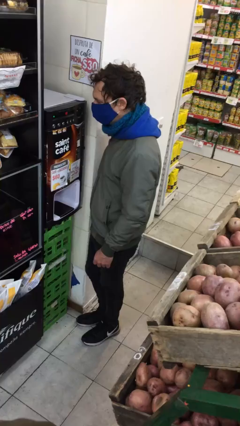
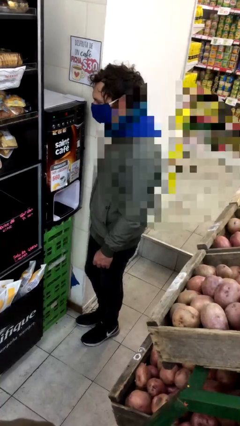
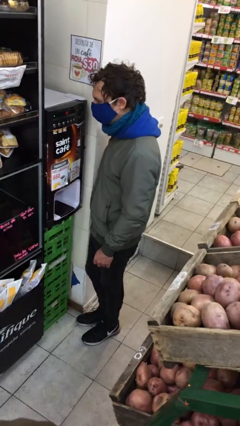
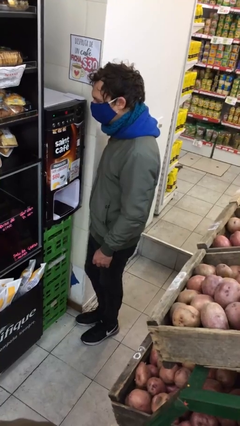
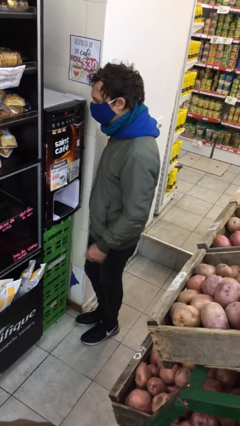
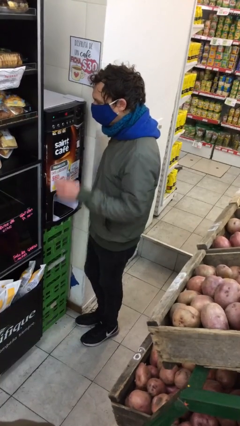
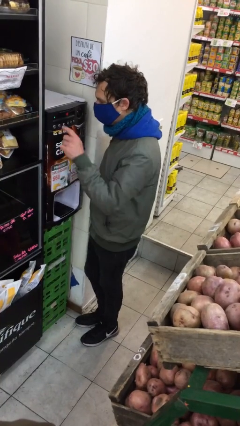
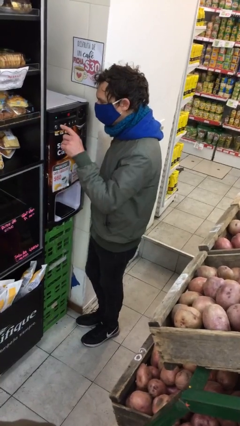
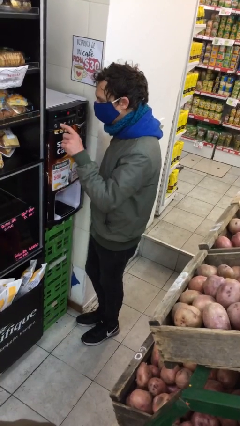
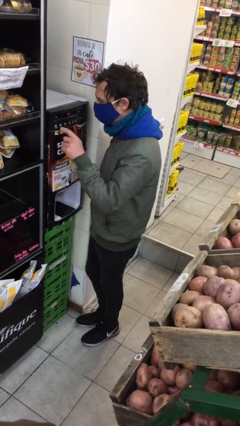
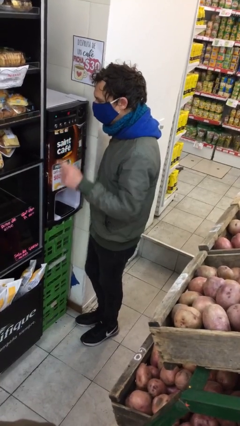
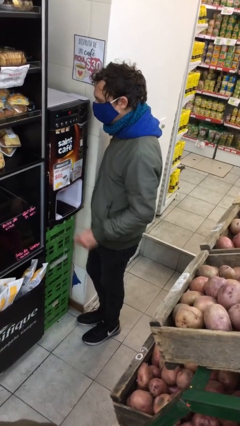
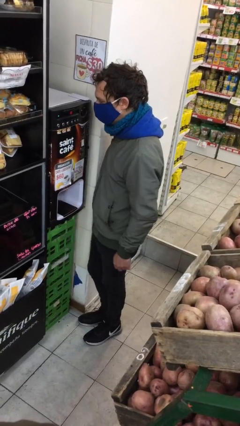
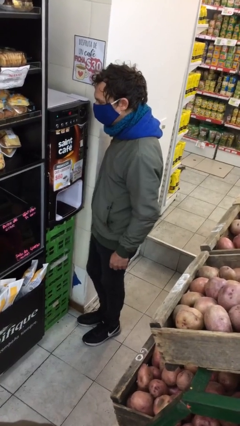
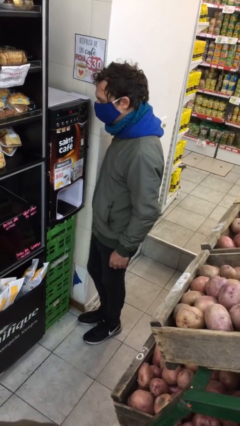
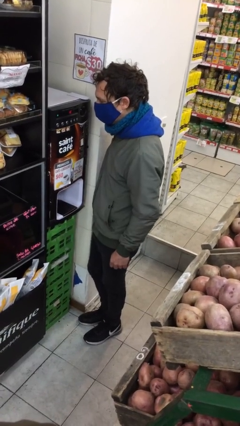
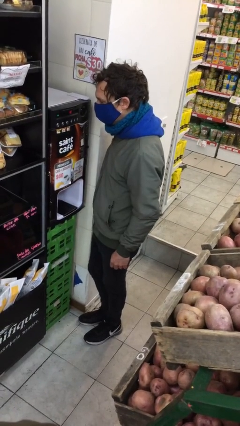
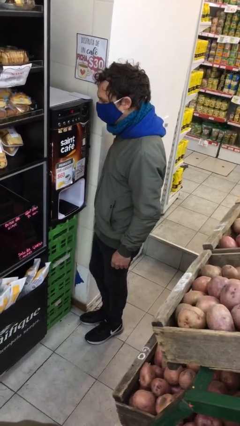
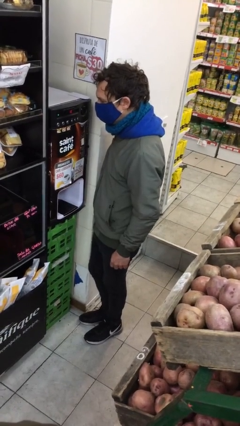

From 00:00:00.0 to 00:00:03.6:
person purchases from machine

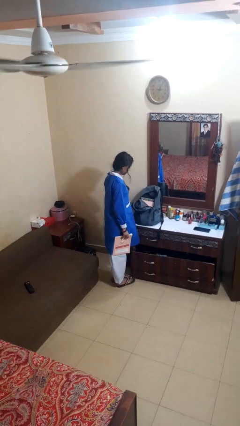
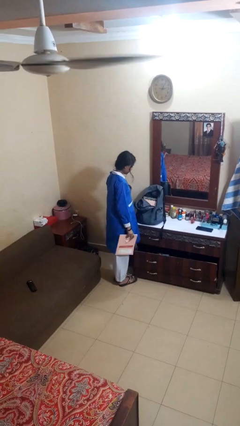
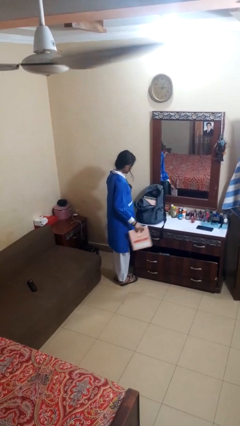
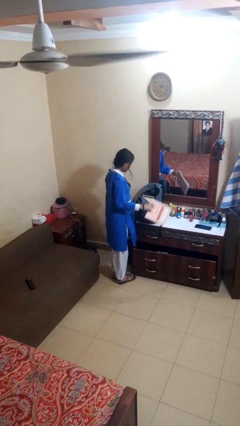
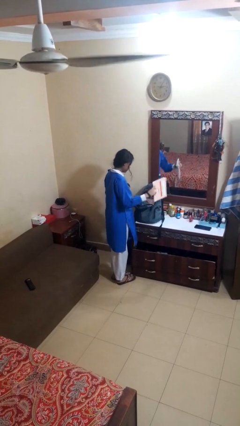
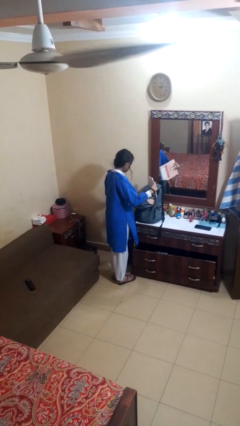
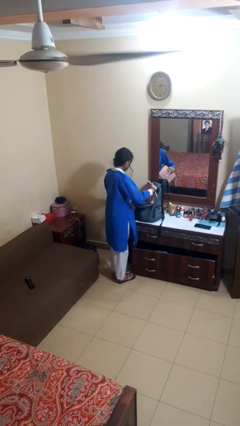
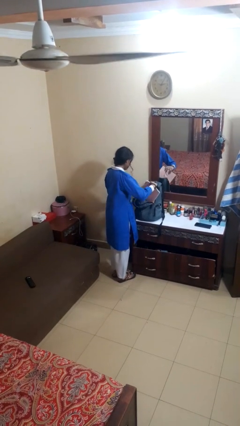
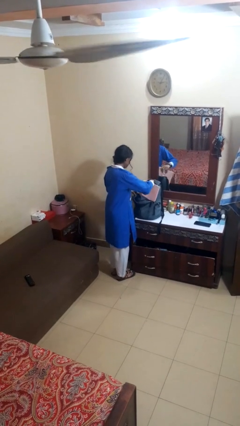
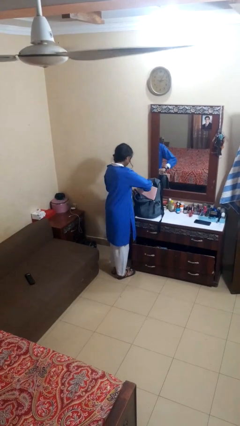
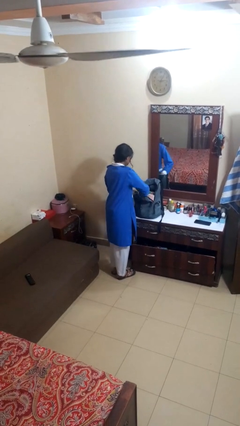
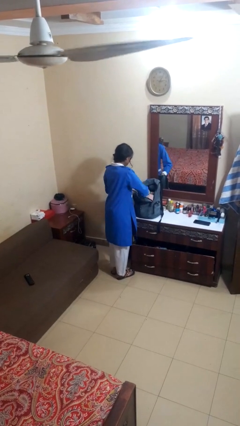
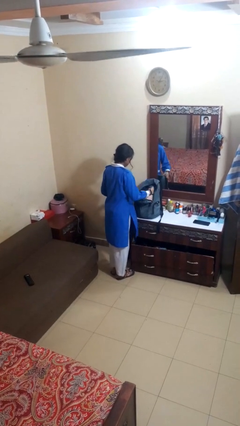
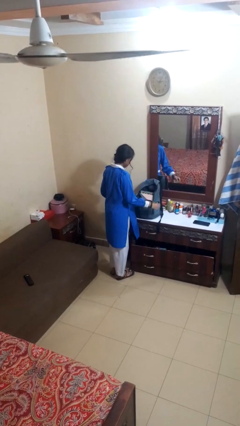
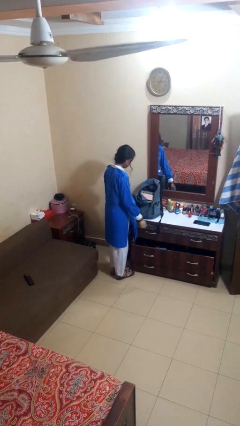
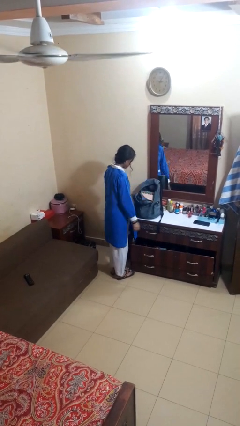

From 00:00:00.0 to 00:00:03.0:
person puts object into bag

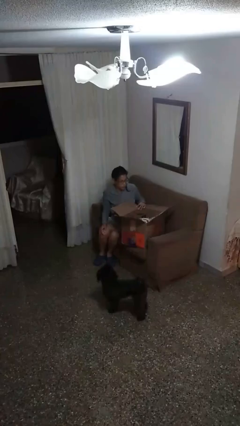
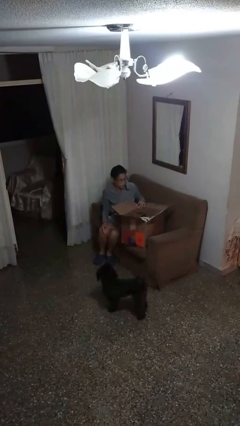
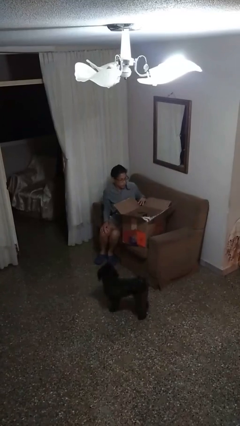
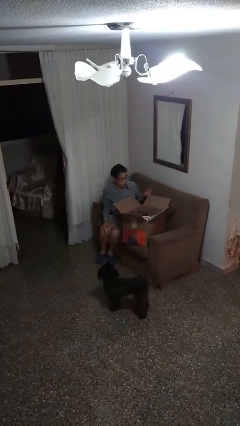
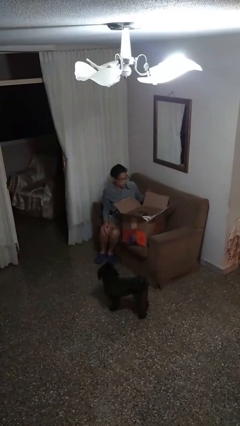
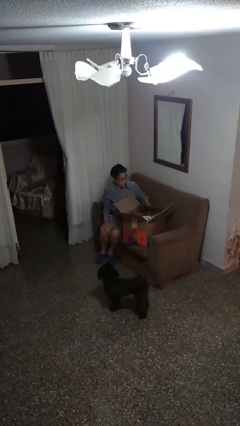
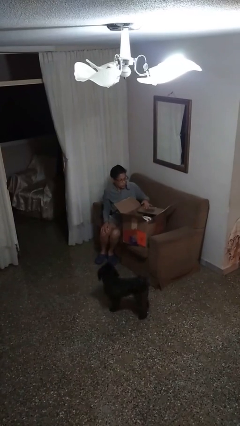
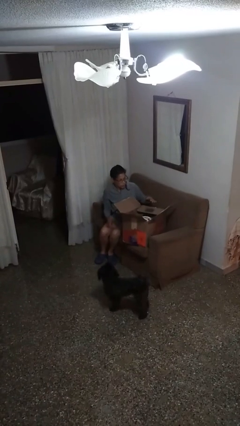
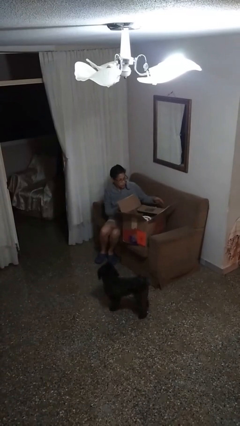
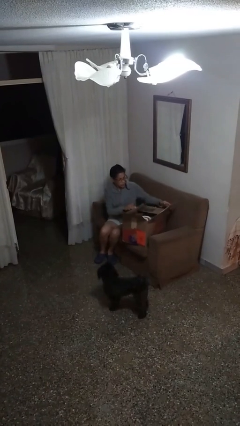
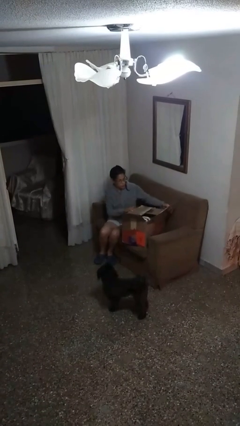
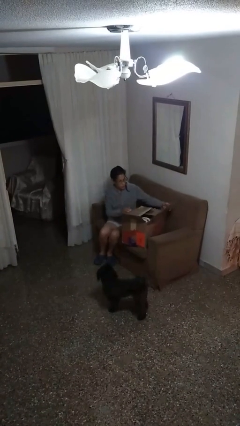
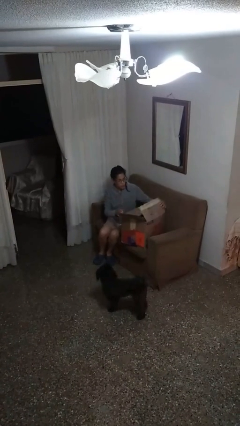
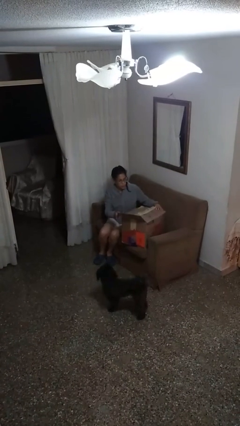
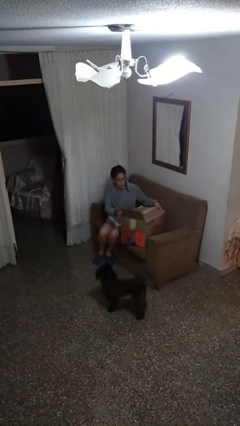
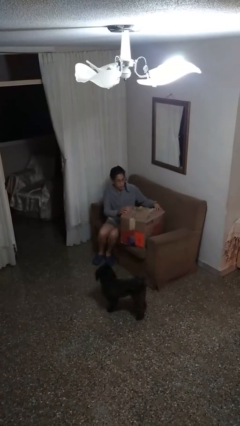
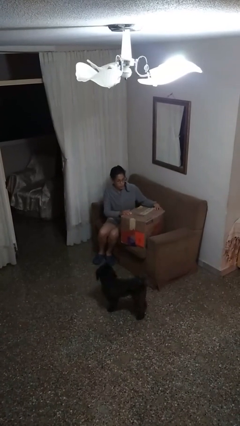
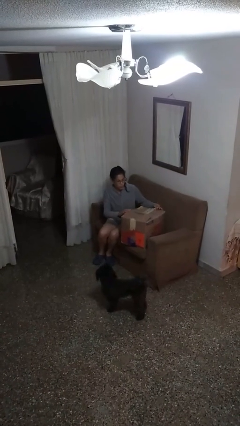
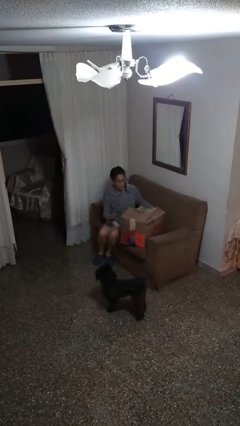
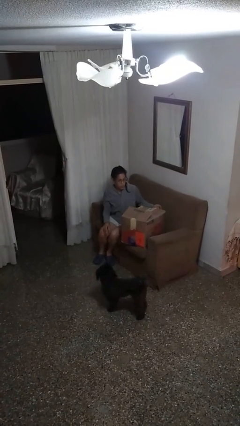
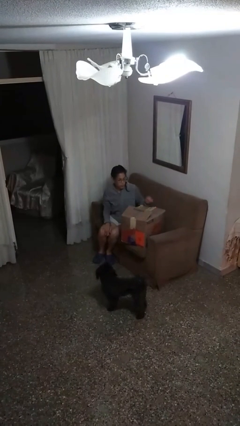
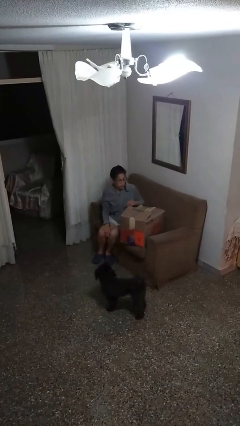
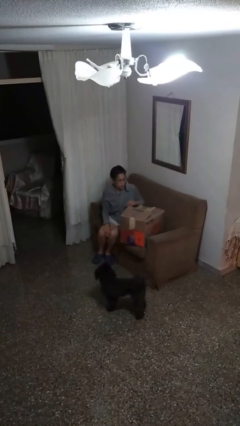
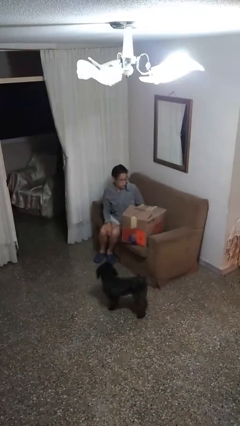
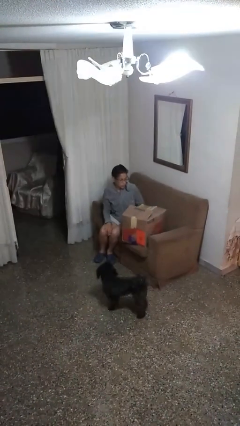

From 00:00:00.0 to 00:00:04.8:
person closes box

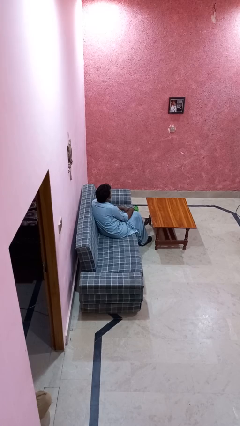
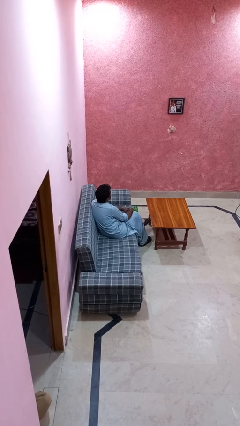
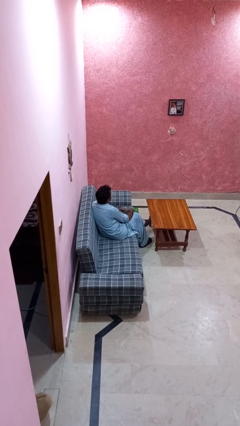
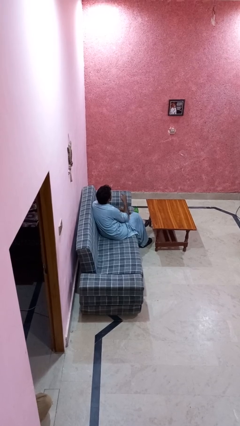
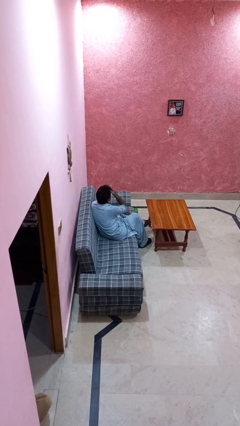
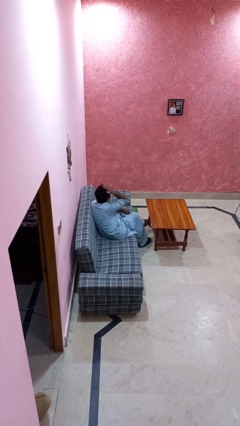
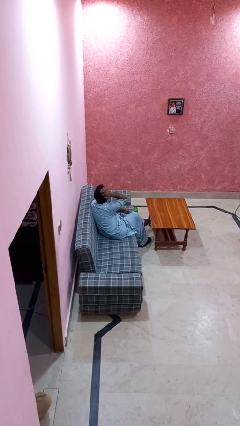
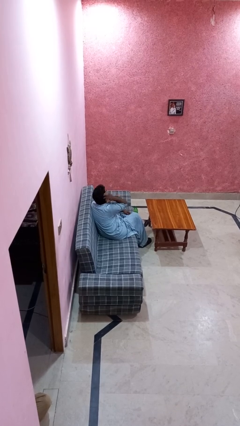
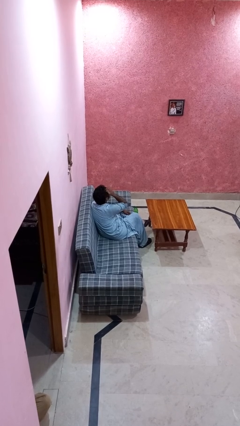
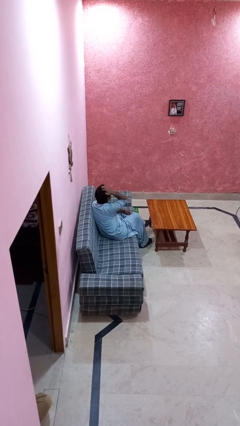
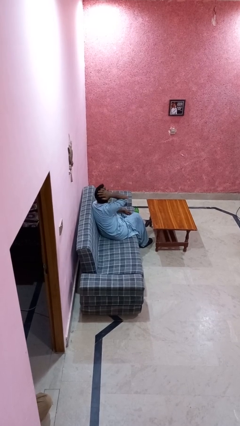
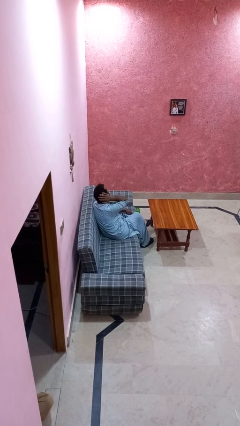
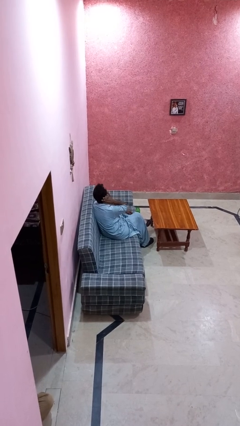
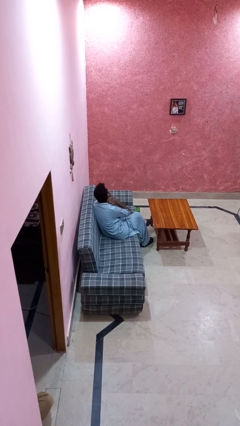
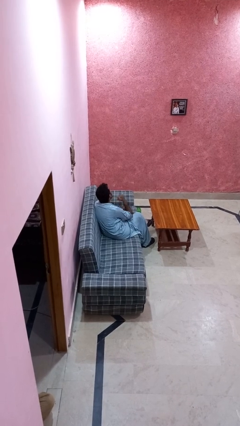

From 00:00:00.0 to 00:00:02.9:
person strokes hair

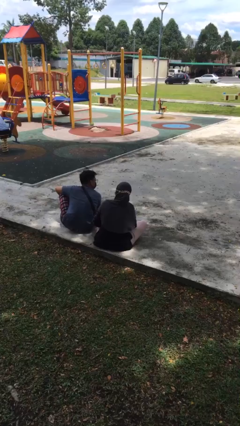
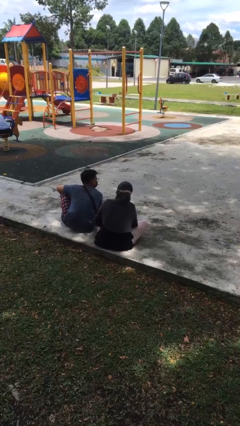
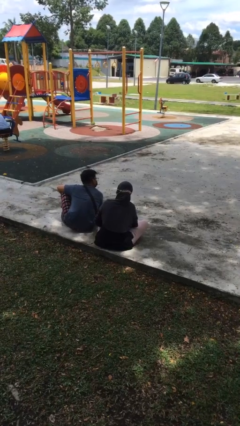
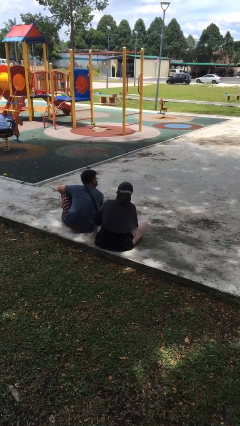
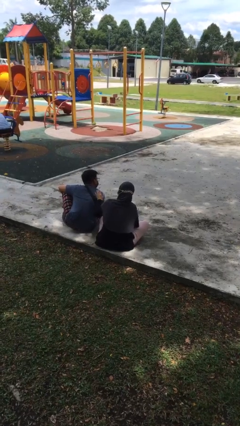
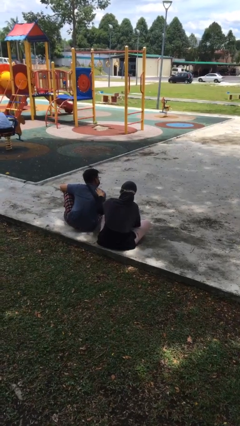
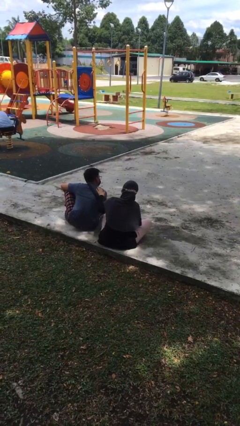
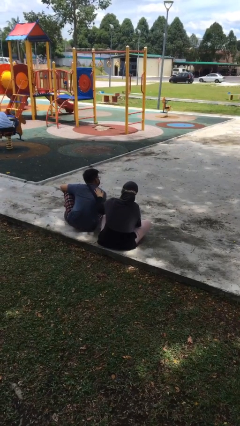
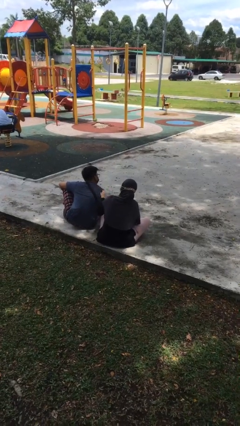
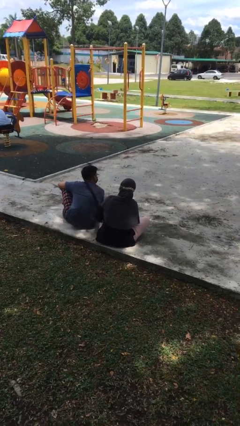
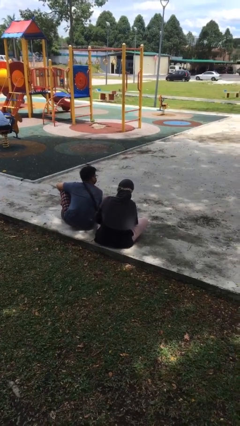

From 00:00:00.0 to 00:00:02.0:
person touches back of person

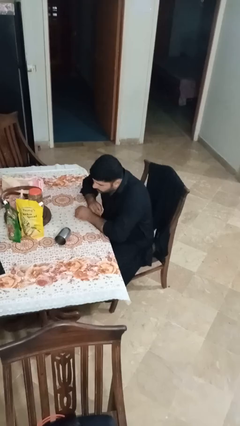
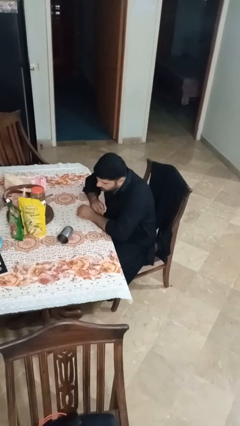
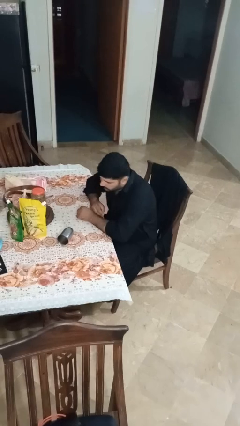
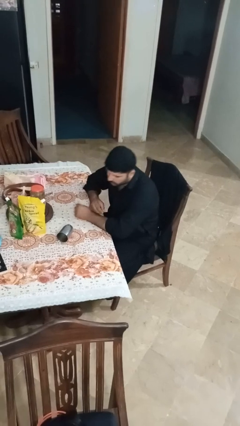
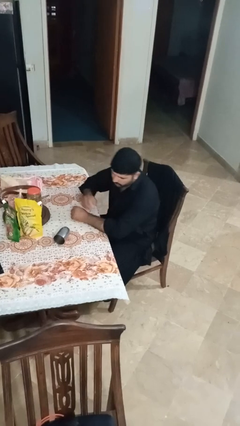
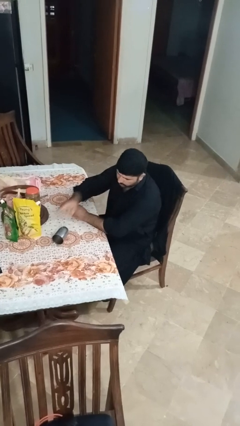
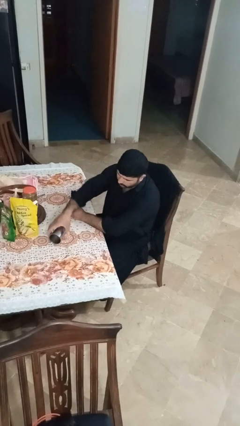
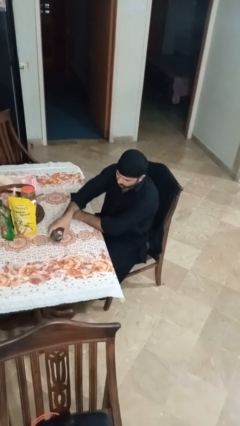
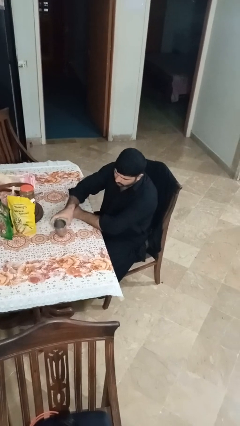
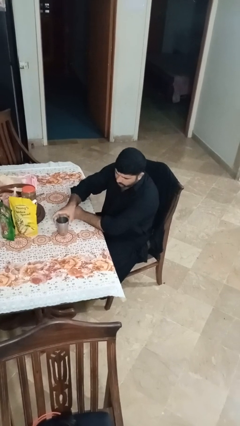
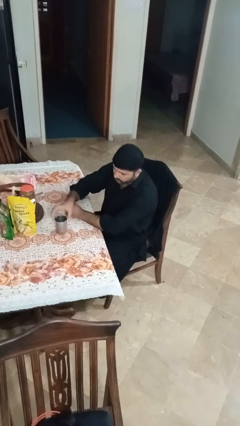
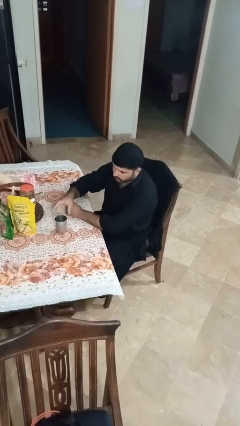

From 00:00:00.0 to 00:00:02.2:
person sets upright glass
